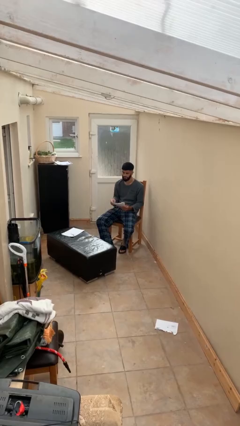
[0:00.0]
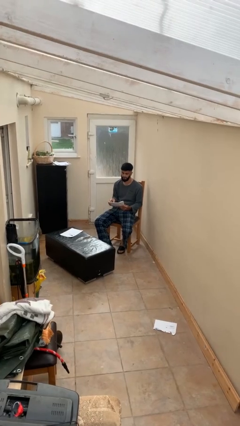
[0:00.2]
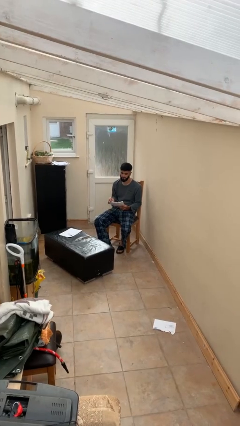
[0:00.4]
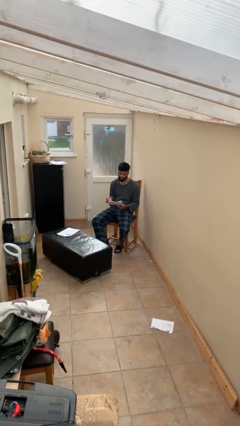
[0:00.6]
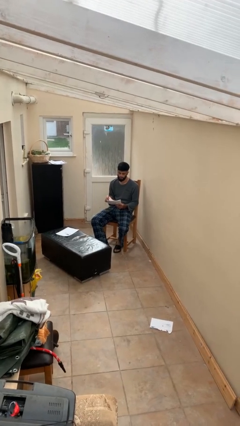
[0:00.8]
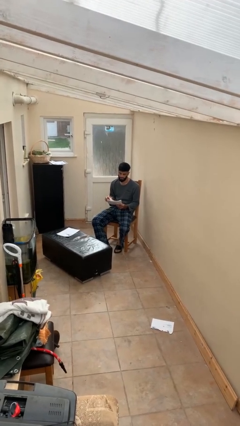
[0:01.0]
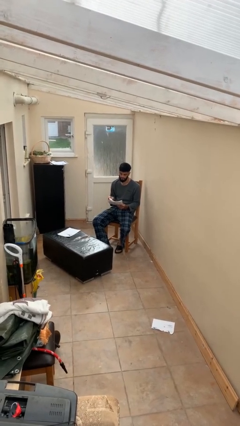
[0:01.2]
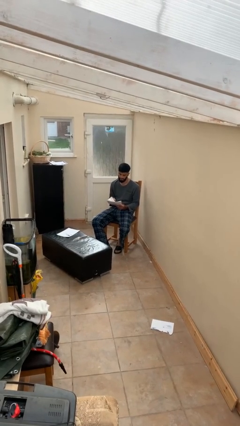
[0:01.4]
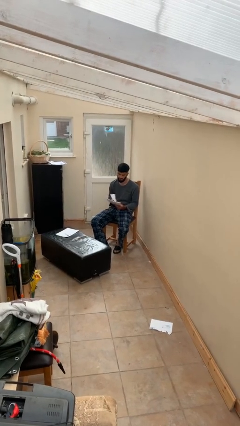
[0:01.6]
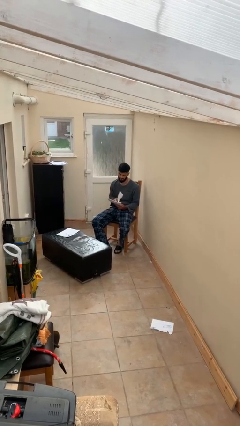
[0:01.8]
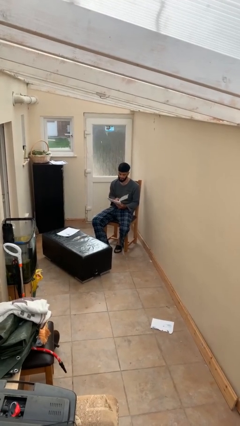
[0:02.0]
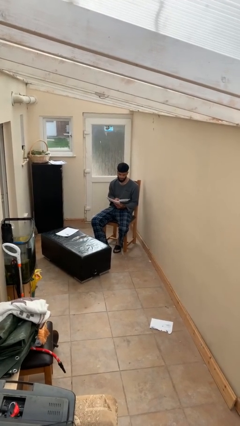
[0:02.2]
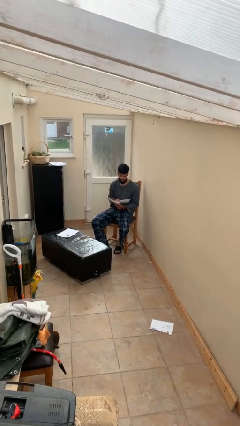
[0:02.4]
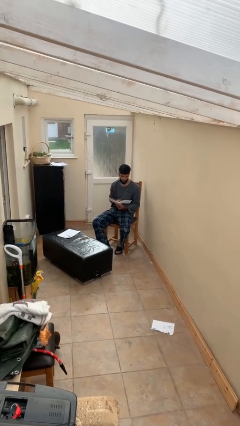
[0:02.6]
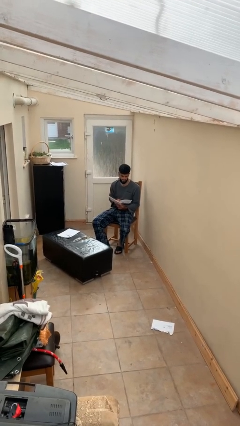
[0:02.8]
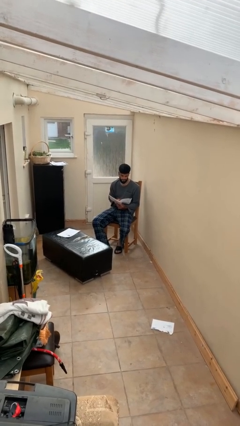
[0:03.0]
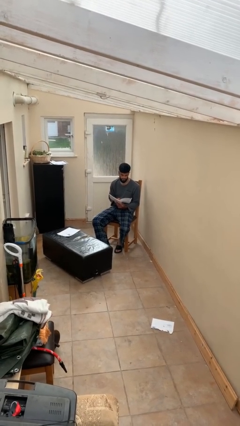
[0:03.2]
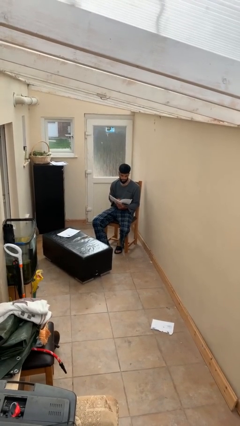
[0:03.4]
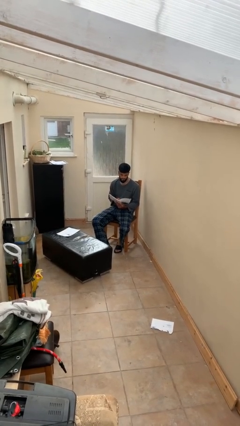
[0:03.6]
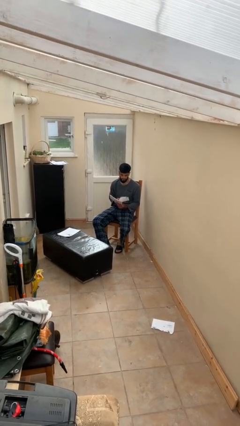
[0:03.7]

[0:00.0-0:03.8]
person reads document

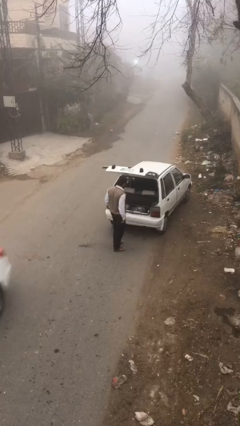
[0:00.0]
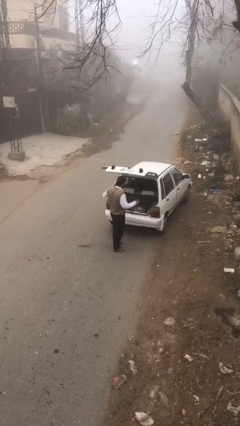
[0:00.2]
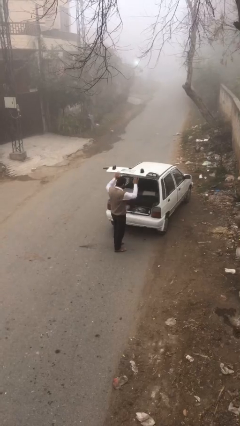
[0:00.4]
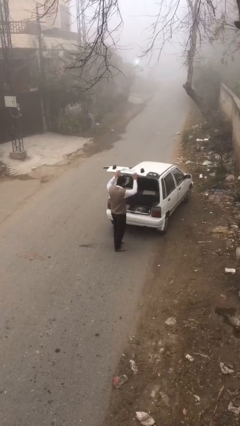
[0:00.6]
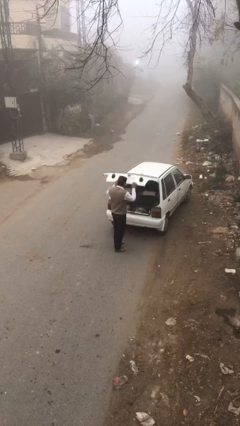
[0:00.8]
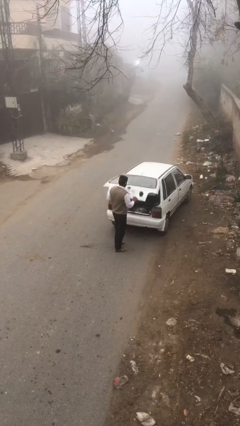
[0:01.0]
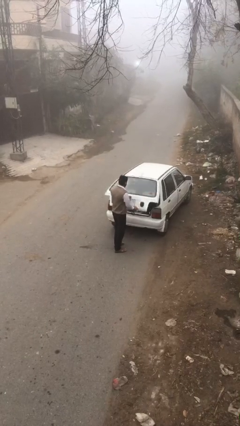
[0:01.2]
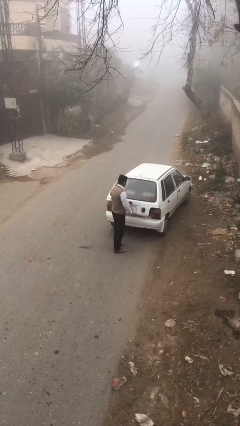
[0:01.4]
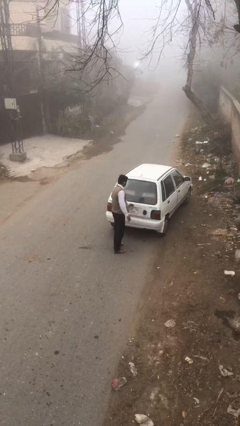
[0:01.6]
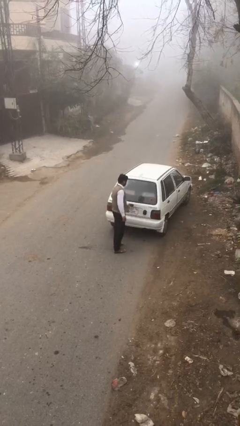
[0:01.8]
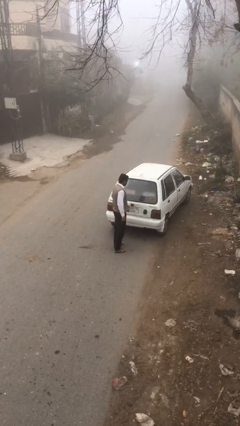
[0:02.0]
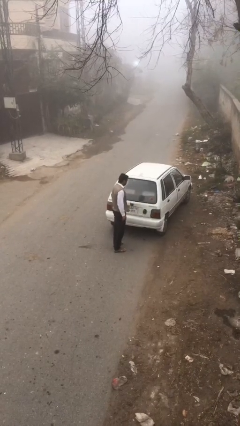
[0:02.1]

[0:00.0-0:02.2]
person closes car trunk

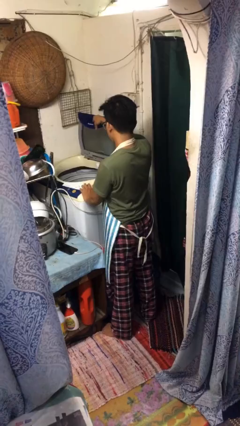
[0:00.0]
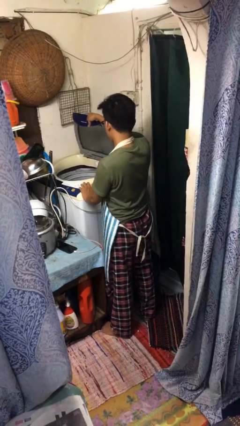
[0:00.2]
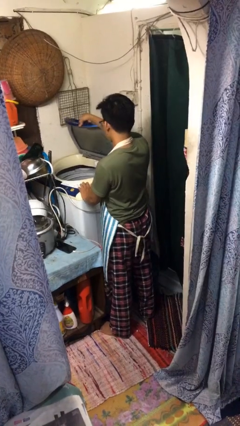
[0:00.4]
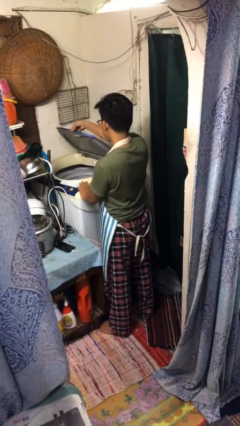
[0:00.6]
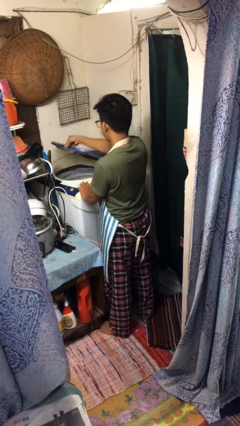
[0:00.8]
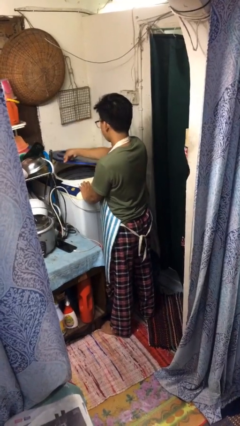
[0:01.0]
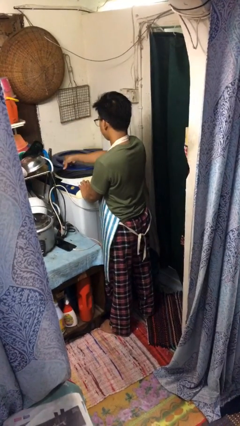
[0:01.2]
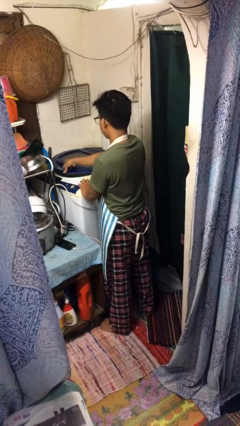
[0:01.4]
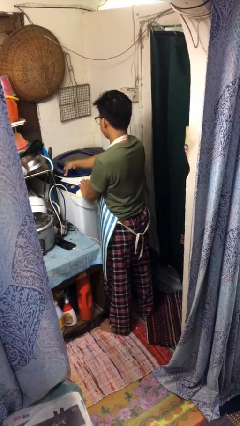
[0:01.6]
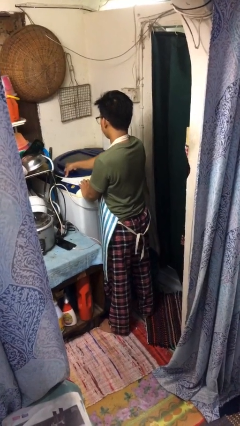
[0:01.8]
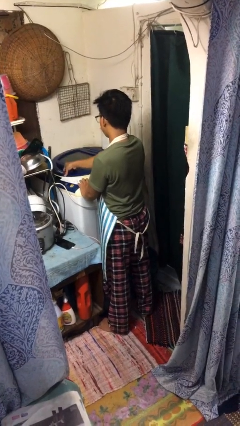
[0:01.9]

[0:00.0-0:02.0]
person closes clothes washer

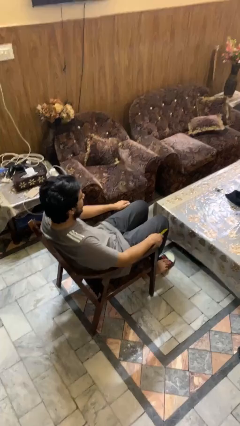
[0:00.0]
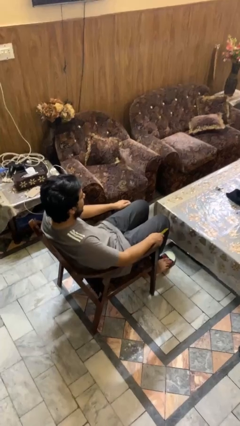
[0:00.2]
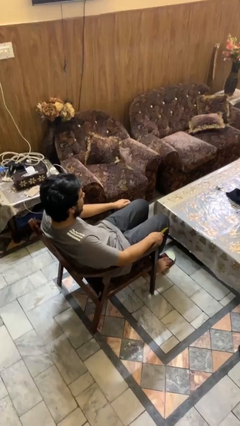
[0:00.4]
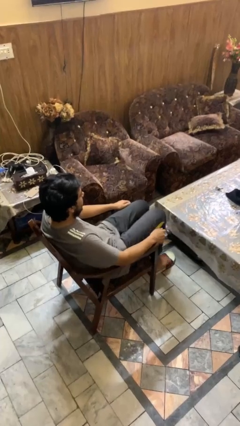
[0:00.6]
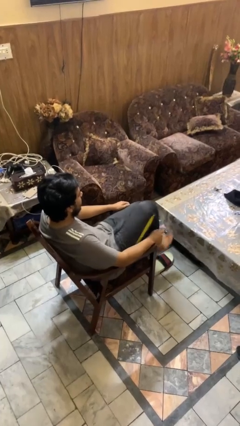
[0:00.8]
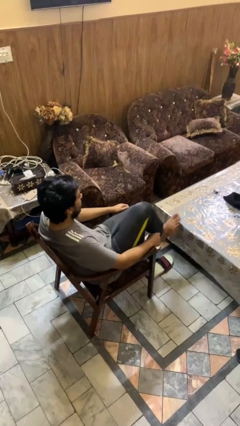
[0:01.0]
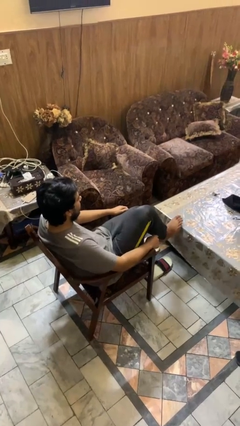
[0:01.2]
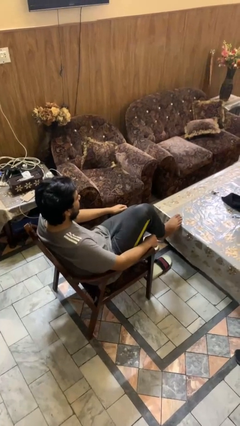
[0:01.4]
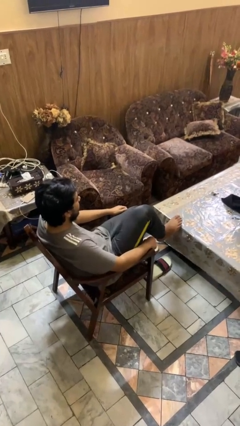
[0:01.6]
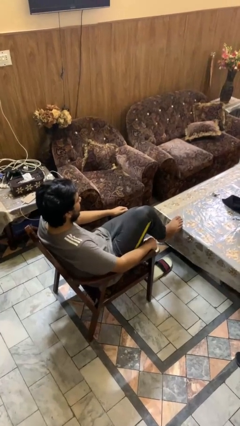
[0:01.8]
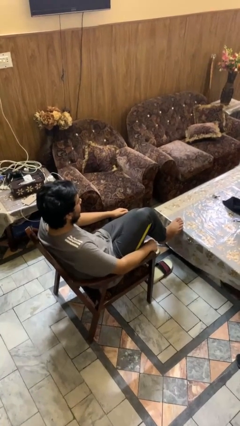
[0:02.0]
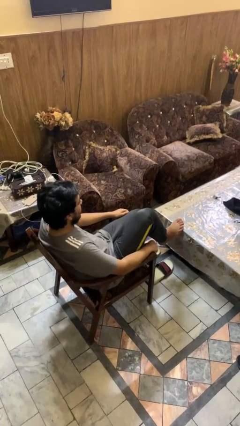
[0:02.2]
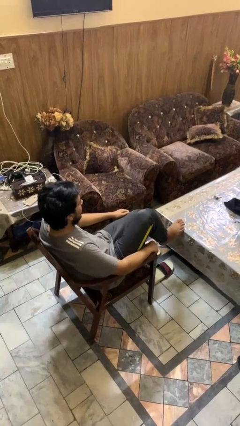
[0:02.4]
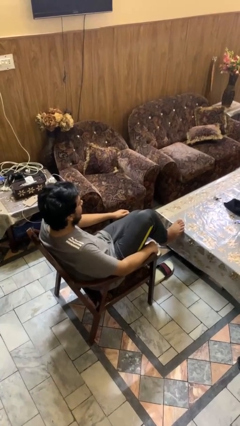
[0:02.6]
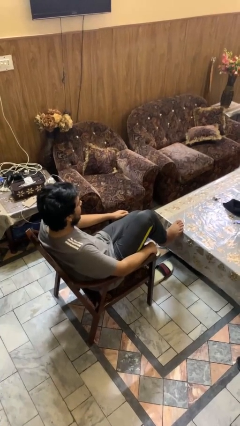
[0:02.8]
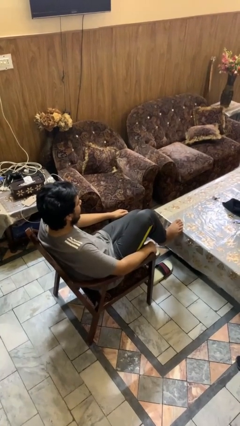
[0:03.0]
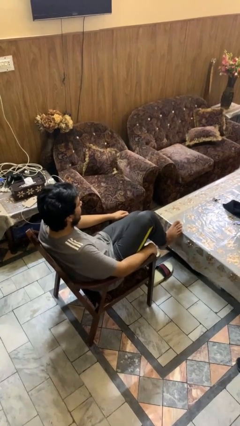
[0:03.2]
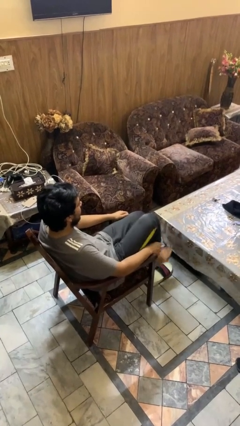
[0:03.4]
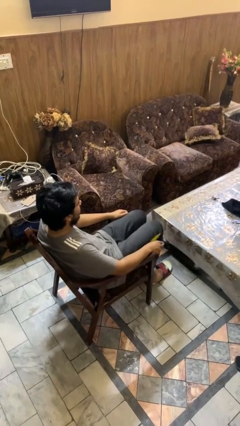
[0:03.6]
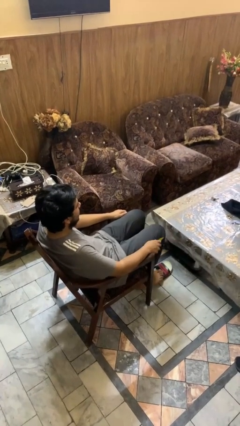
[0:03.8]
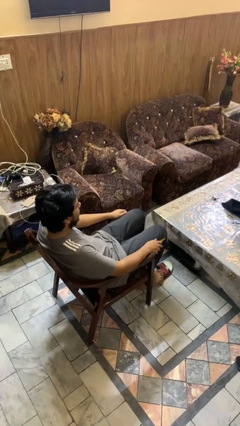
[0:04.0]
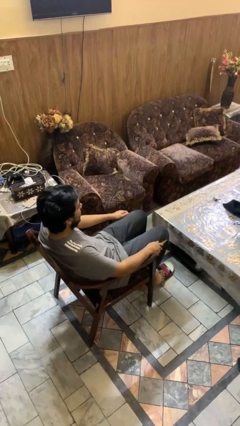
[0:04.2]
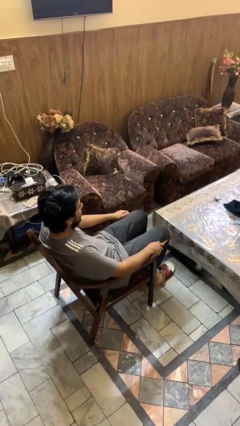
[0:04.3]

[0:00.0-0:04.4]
person puts feet up

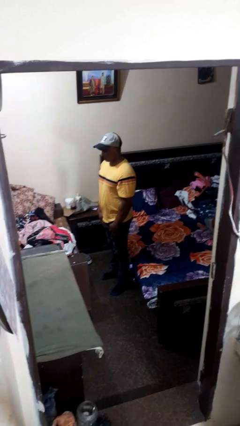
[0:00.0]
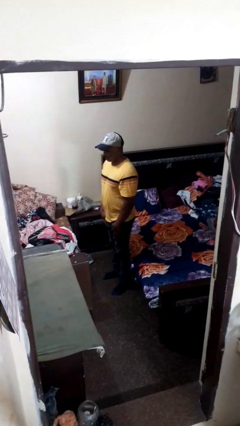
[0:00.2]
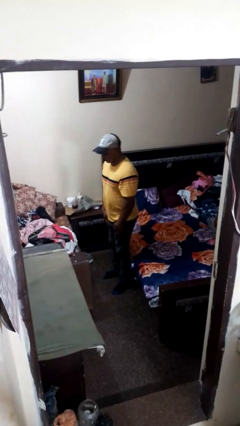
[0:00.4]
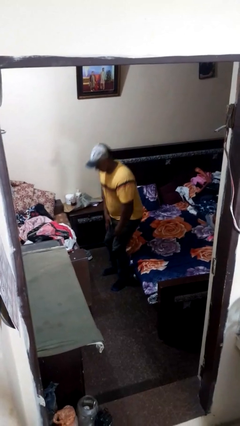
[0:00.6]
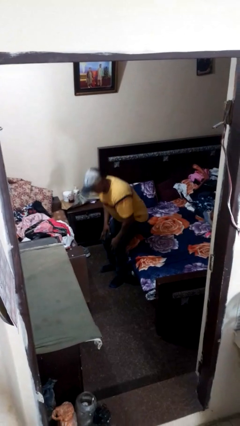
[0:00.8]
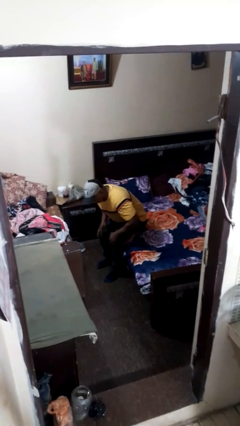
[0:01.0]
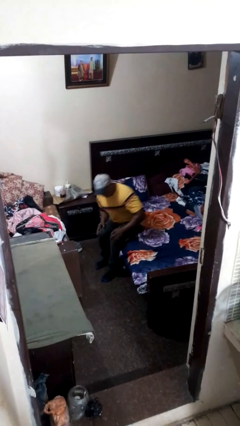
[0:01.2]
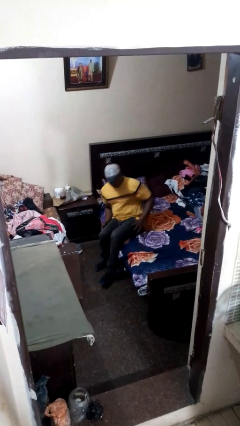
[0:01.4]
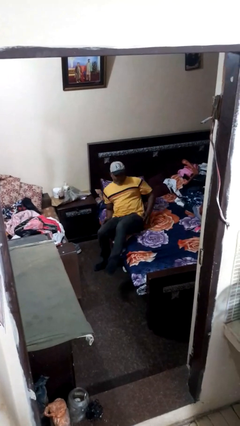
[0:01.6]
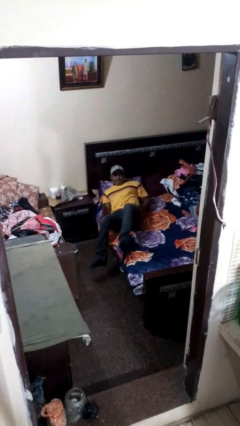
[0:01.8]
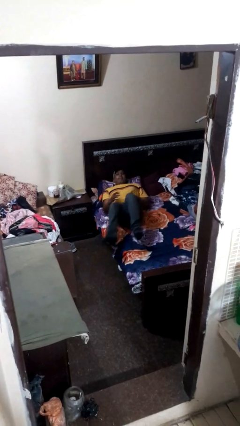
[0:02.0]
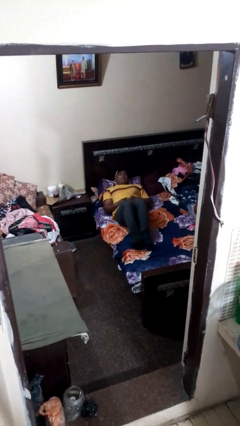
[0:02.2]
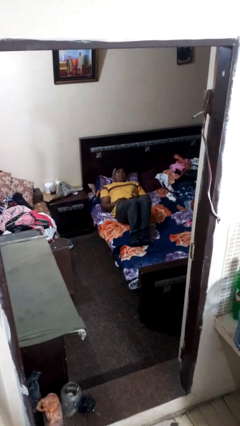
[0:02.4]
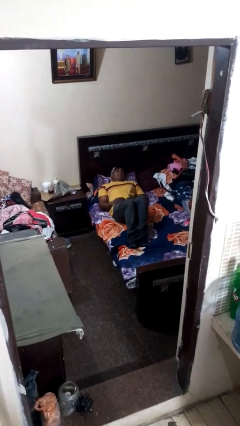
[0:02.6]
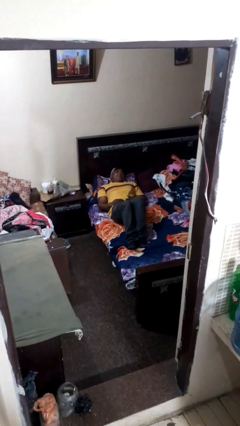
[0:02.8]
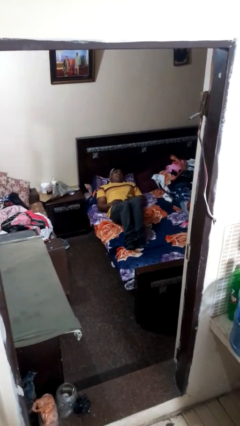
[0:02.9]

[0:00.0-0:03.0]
person lies down on bed

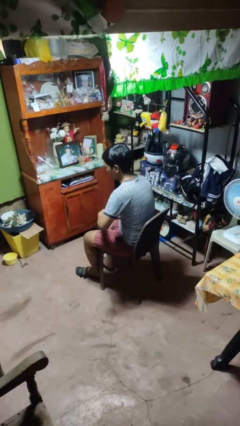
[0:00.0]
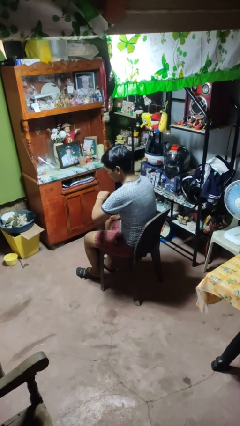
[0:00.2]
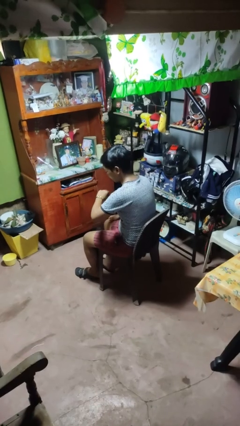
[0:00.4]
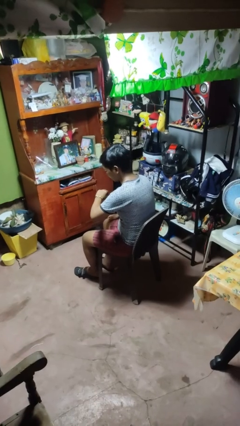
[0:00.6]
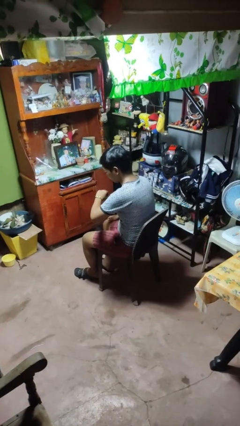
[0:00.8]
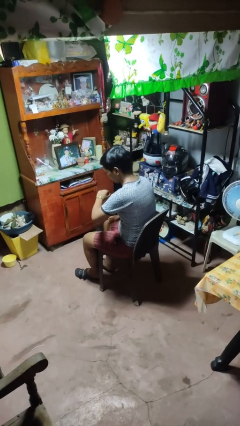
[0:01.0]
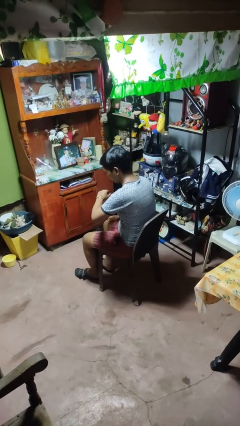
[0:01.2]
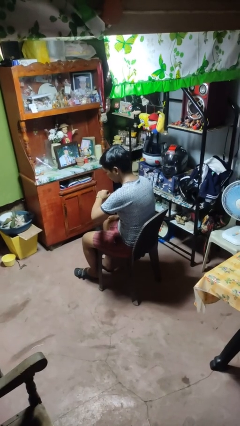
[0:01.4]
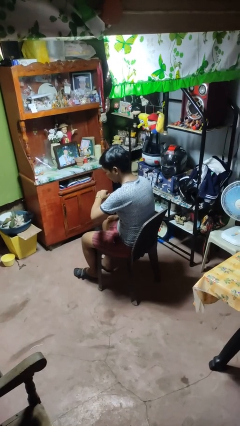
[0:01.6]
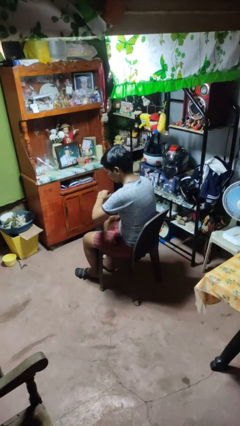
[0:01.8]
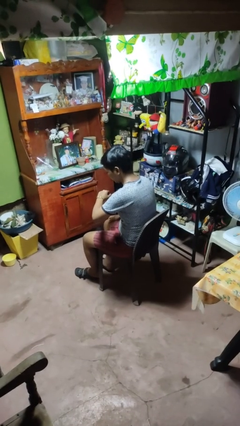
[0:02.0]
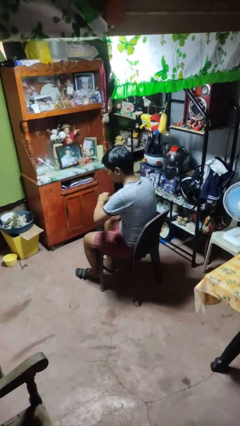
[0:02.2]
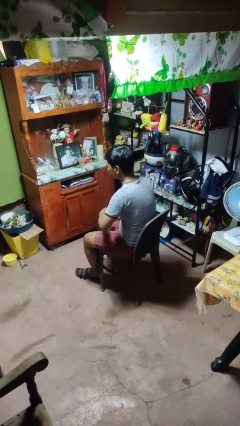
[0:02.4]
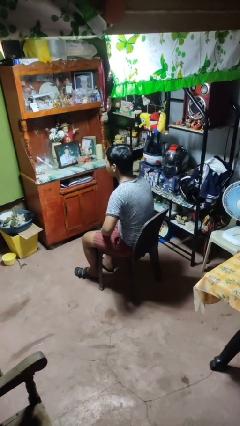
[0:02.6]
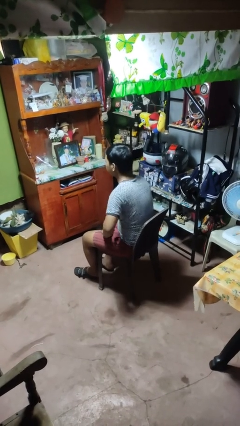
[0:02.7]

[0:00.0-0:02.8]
person looks at wristwatch
